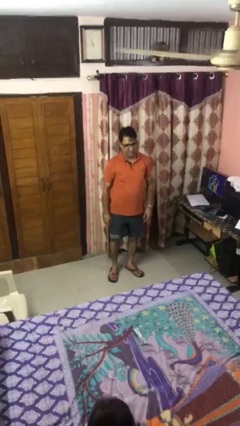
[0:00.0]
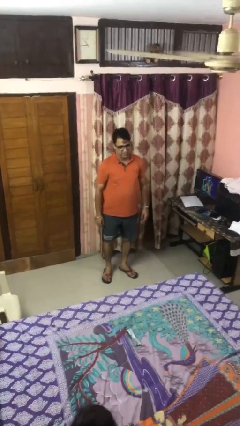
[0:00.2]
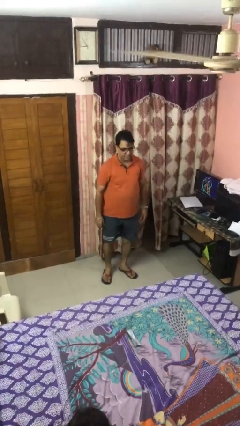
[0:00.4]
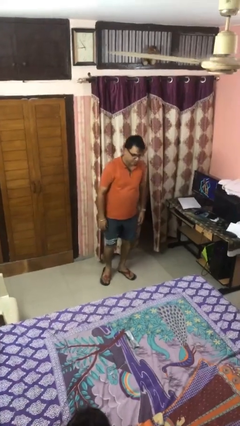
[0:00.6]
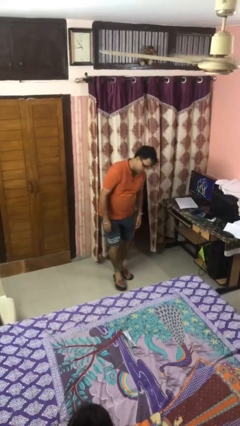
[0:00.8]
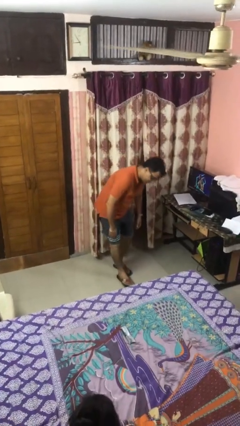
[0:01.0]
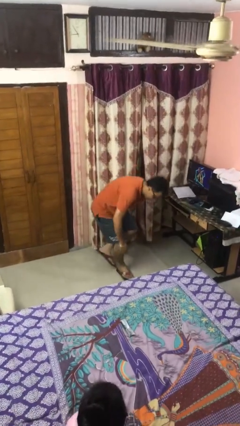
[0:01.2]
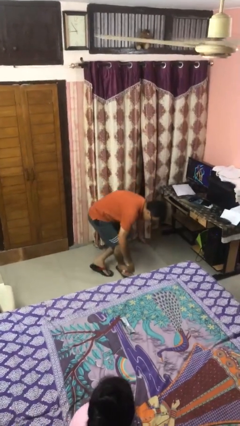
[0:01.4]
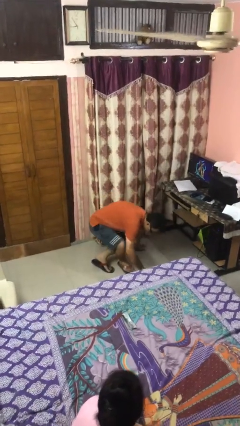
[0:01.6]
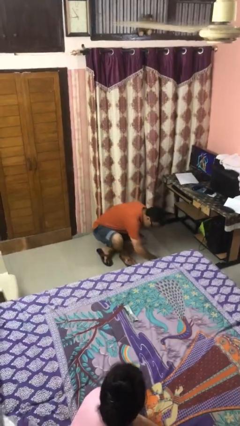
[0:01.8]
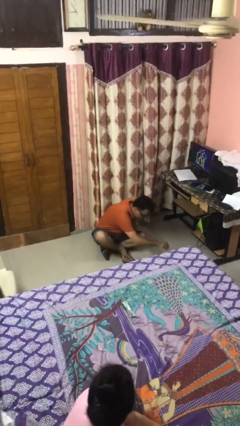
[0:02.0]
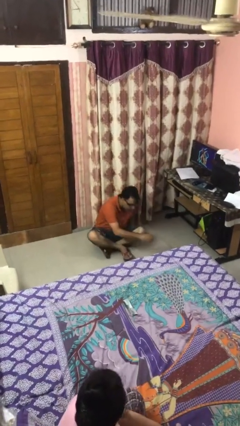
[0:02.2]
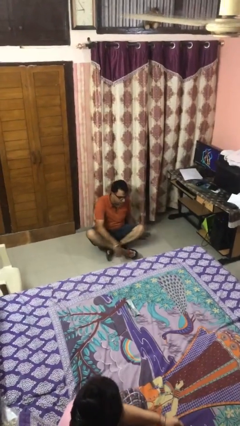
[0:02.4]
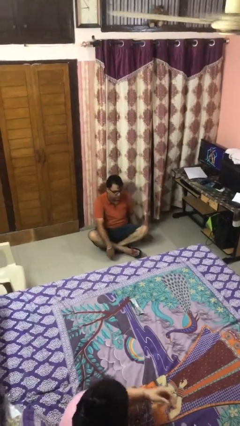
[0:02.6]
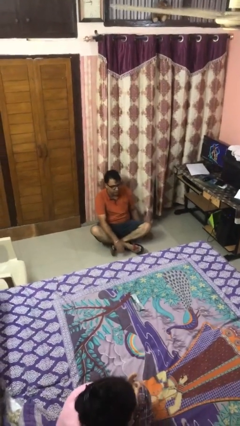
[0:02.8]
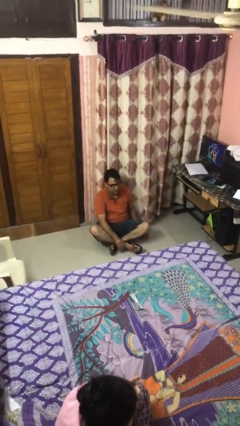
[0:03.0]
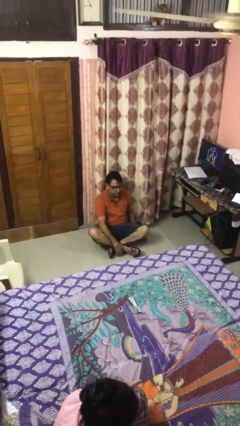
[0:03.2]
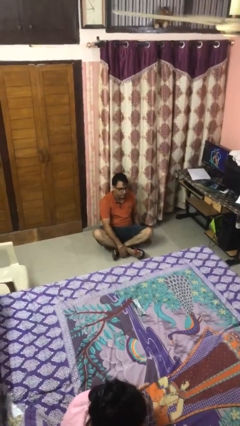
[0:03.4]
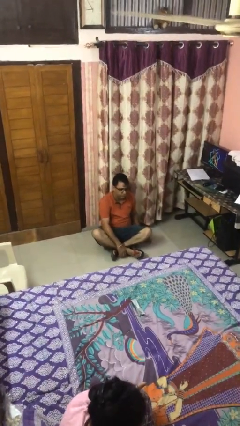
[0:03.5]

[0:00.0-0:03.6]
person sits crisscross

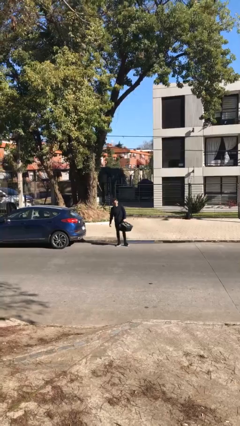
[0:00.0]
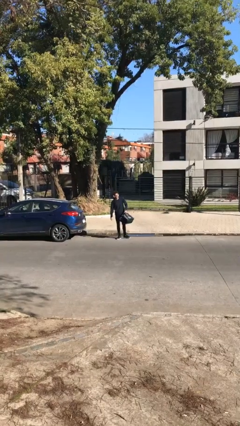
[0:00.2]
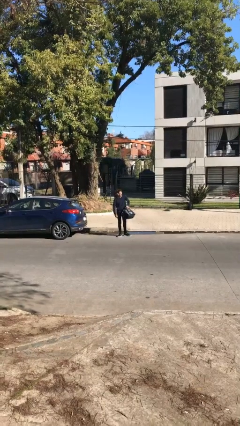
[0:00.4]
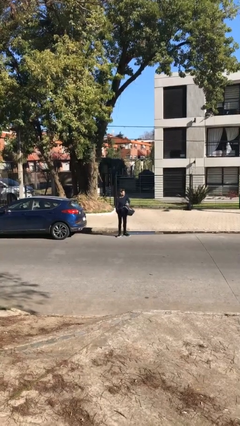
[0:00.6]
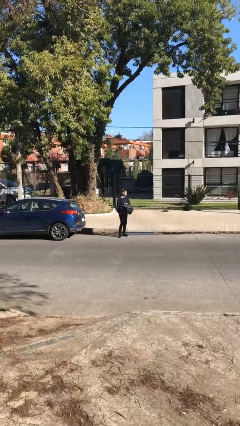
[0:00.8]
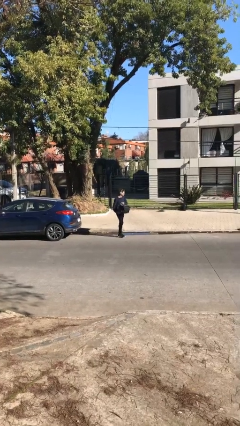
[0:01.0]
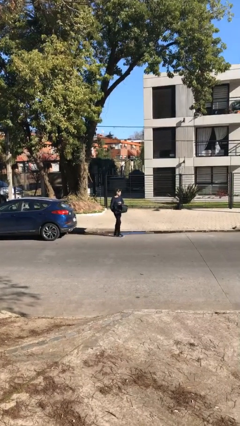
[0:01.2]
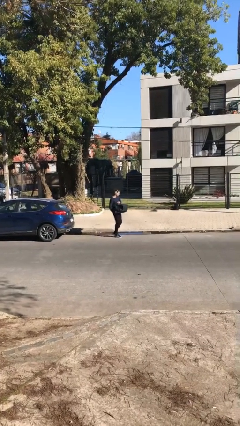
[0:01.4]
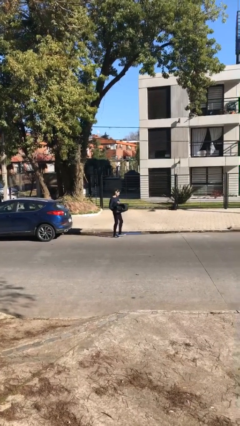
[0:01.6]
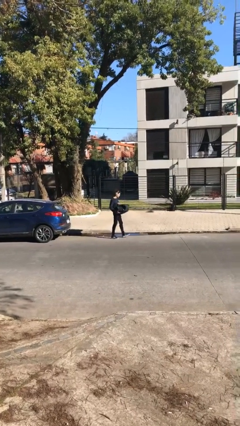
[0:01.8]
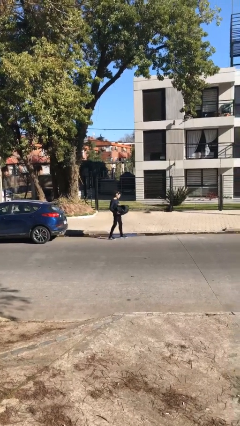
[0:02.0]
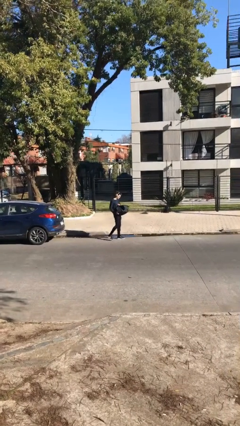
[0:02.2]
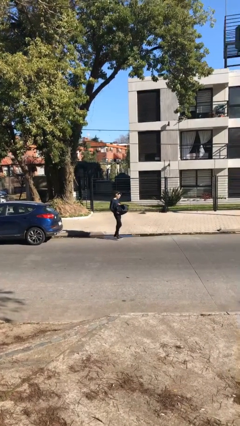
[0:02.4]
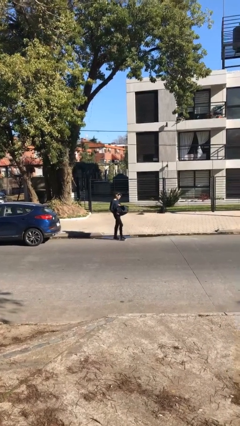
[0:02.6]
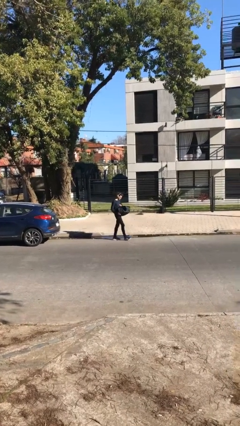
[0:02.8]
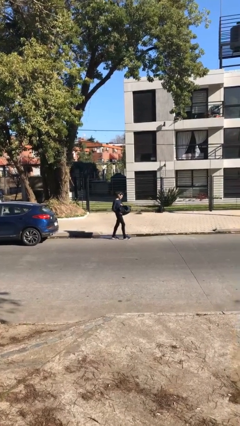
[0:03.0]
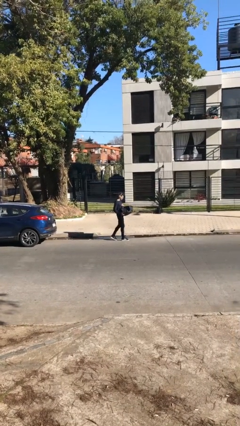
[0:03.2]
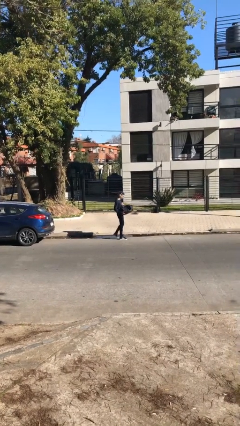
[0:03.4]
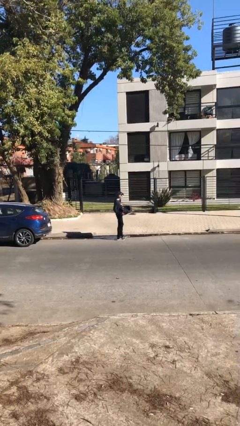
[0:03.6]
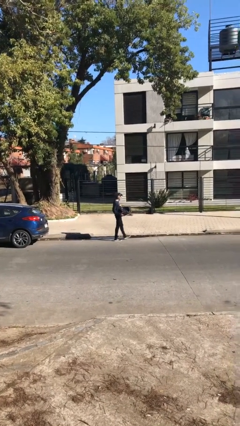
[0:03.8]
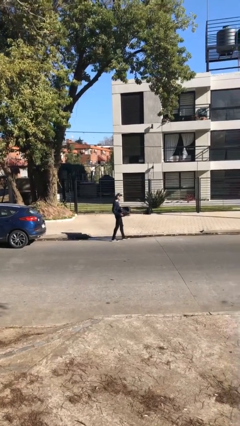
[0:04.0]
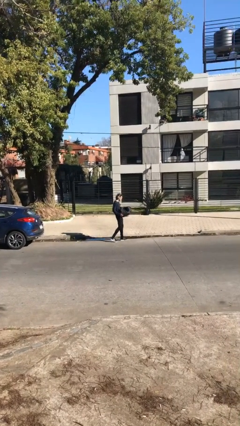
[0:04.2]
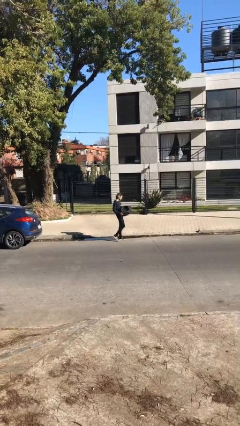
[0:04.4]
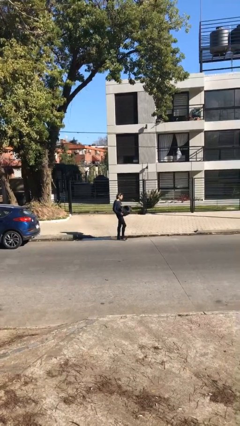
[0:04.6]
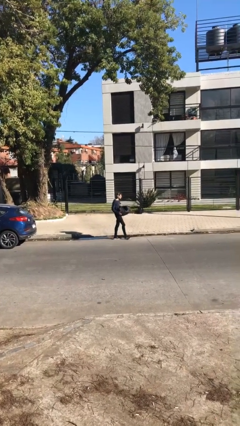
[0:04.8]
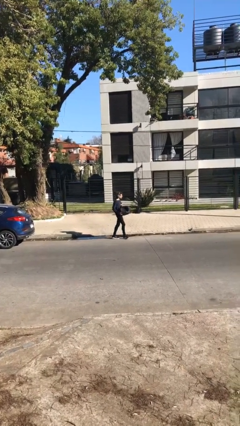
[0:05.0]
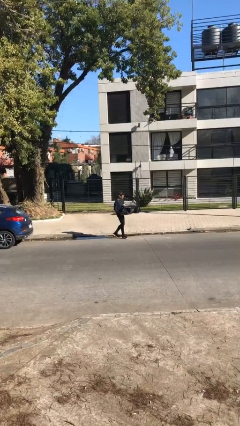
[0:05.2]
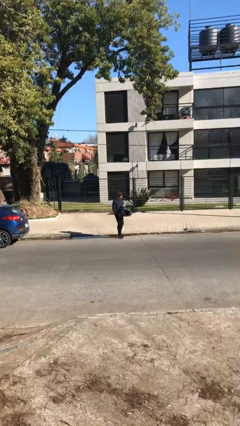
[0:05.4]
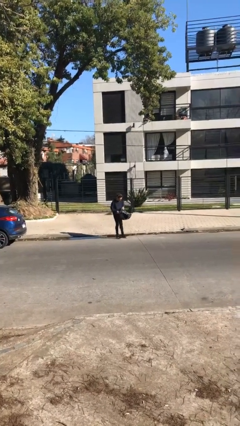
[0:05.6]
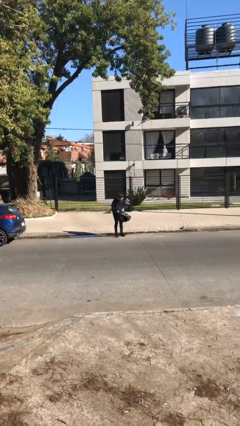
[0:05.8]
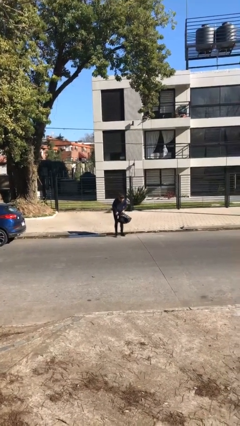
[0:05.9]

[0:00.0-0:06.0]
person carries heavy object

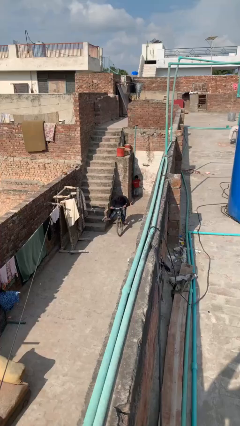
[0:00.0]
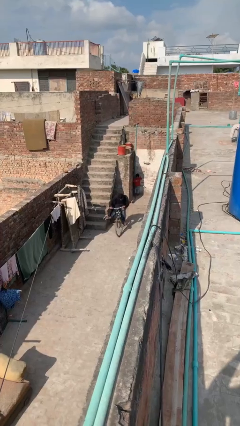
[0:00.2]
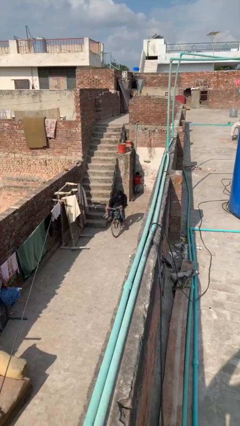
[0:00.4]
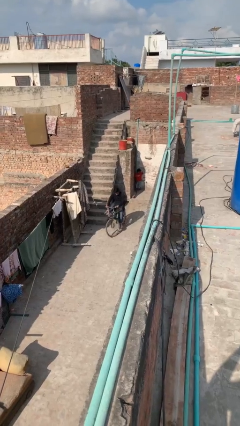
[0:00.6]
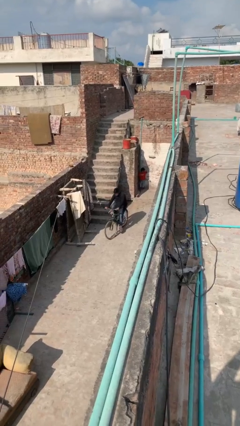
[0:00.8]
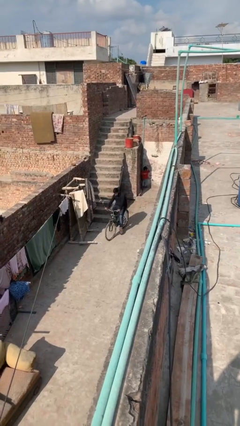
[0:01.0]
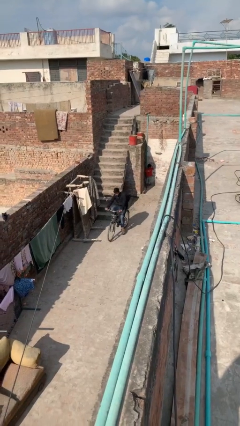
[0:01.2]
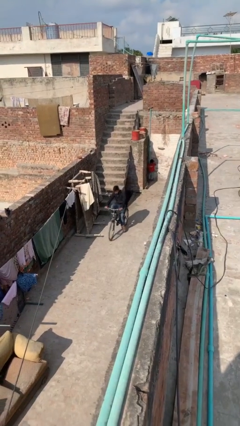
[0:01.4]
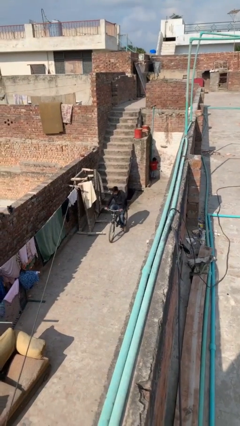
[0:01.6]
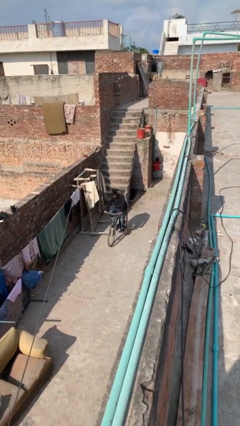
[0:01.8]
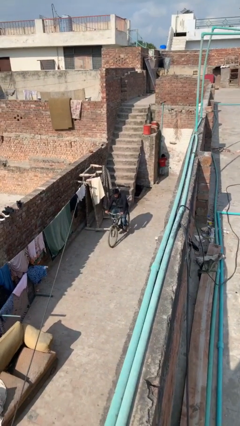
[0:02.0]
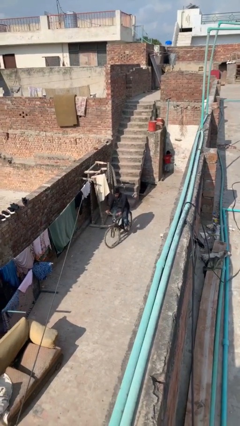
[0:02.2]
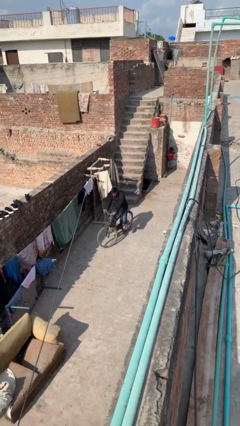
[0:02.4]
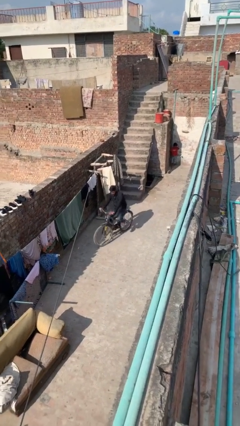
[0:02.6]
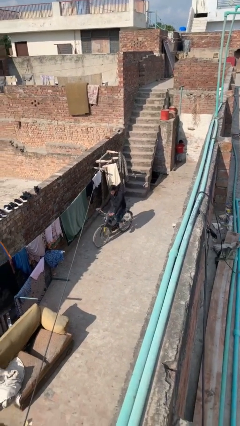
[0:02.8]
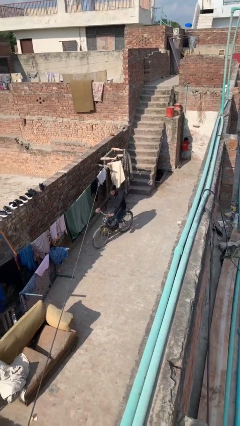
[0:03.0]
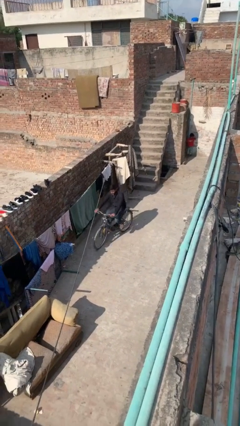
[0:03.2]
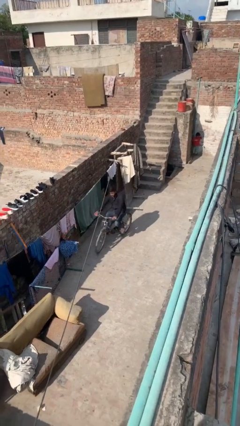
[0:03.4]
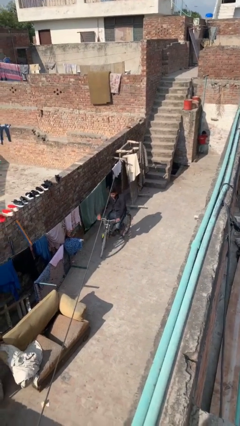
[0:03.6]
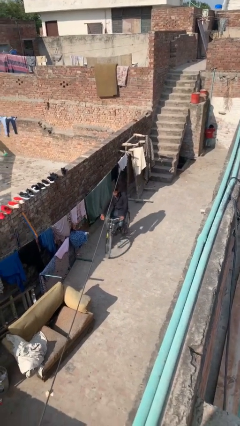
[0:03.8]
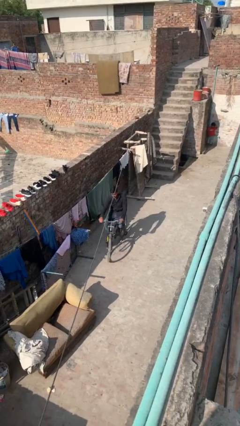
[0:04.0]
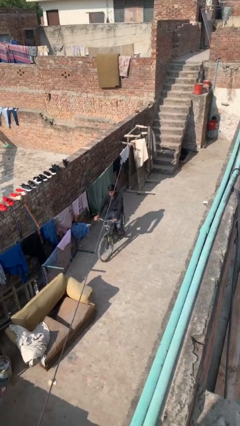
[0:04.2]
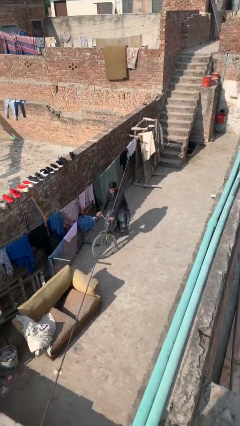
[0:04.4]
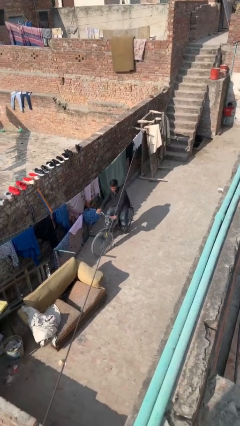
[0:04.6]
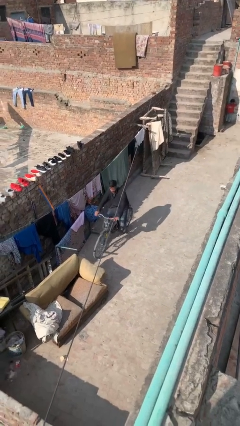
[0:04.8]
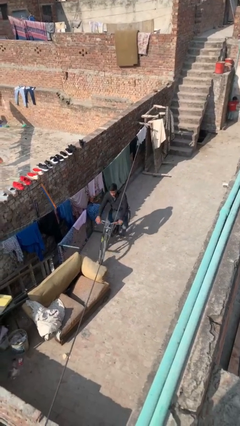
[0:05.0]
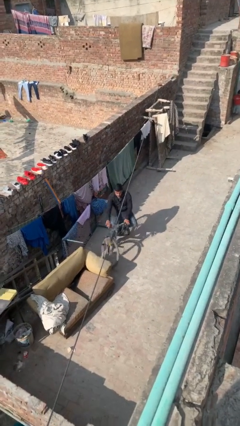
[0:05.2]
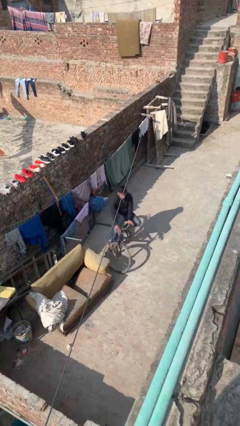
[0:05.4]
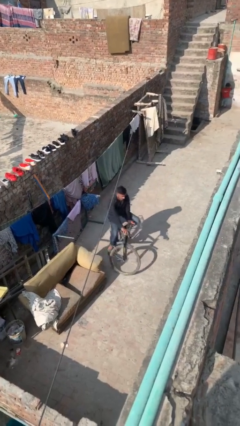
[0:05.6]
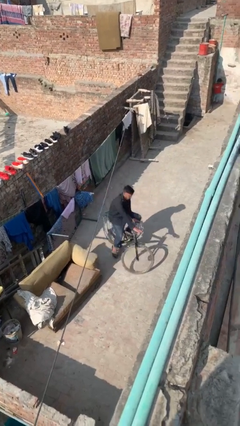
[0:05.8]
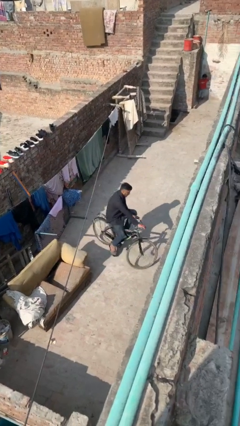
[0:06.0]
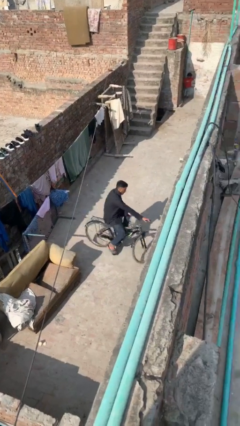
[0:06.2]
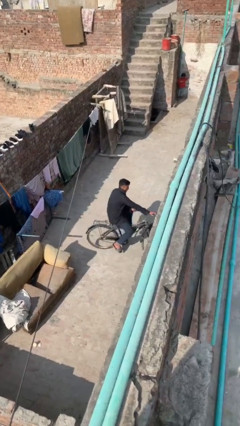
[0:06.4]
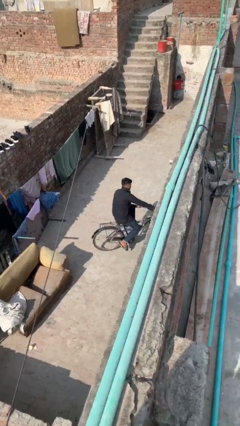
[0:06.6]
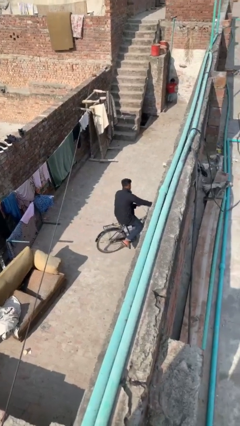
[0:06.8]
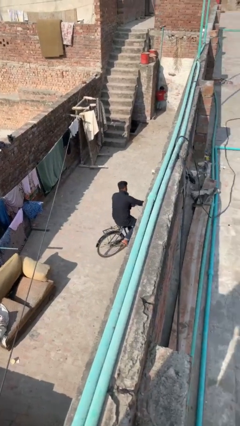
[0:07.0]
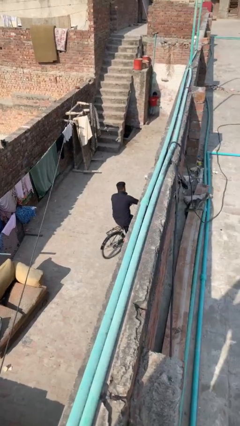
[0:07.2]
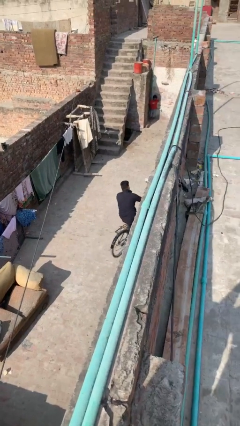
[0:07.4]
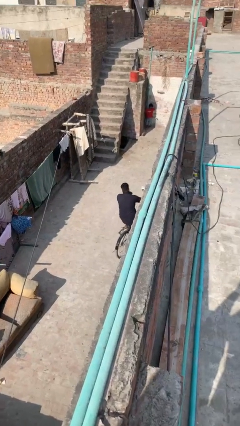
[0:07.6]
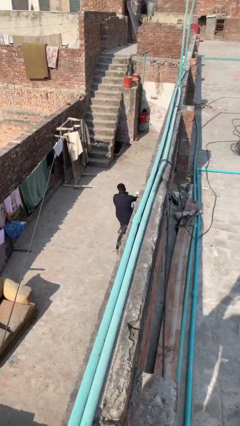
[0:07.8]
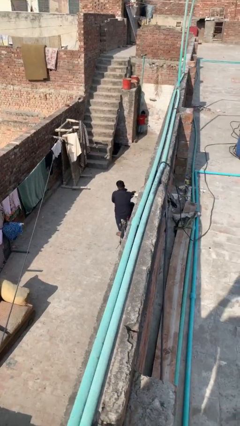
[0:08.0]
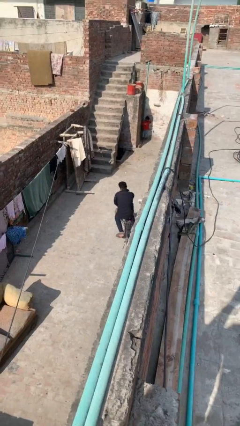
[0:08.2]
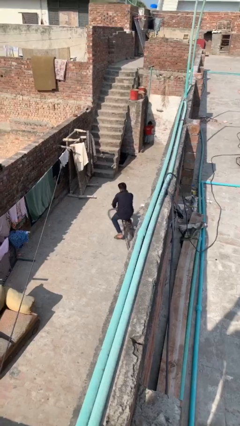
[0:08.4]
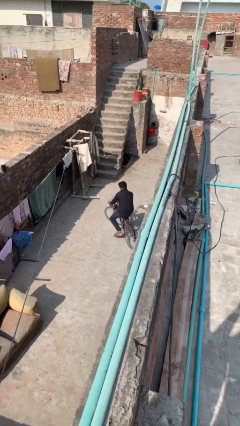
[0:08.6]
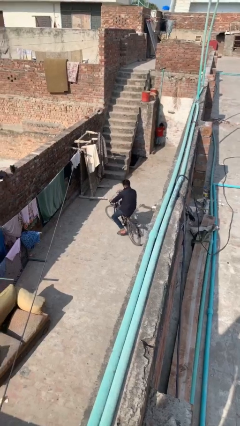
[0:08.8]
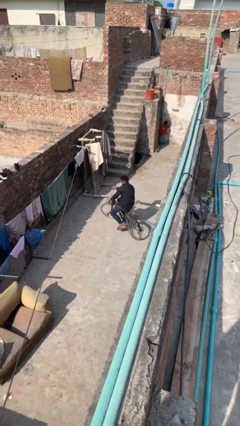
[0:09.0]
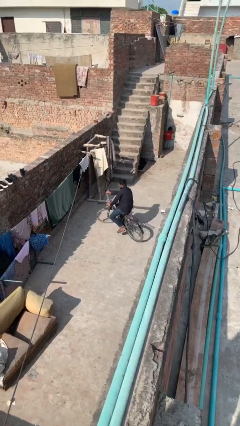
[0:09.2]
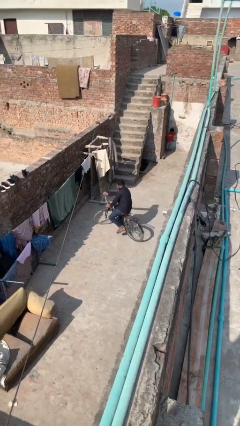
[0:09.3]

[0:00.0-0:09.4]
person rides bicycle
